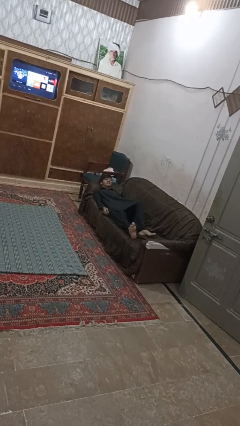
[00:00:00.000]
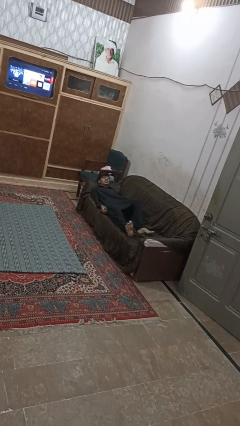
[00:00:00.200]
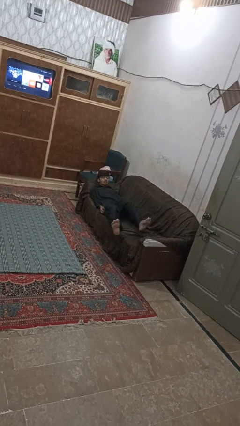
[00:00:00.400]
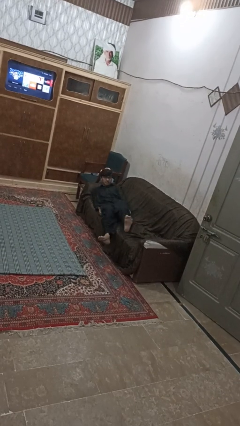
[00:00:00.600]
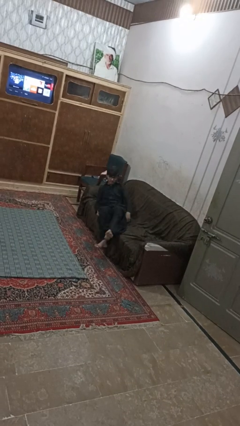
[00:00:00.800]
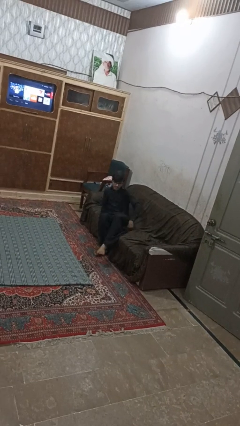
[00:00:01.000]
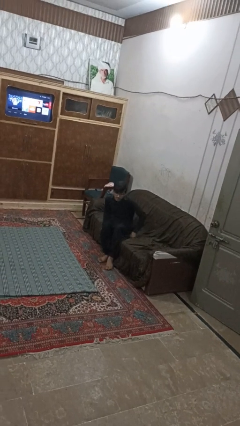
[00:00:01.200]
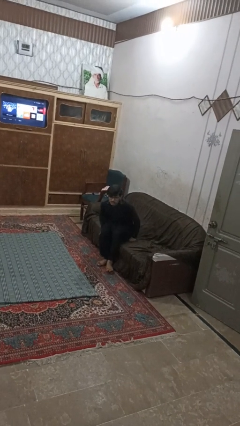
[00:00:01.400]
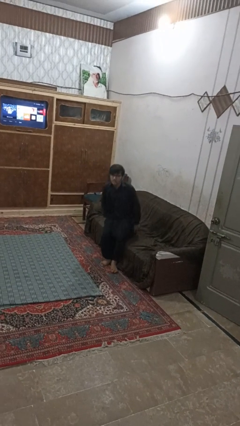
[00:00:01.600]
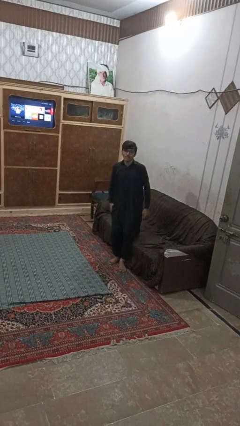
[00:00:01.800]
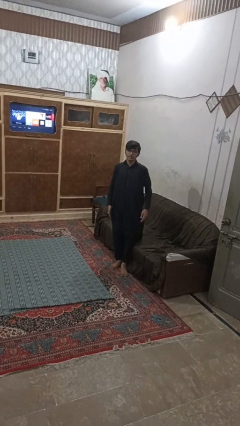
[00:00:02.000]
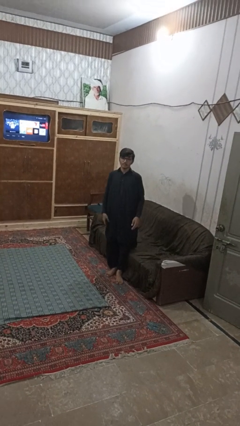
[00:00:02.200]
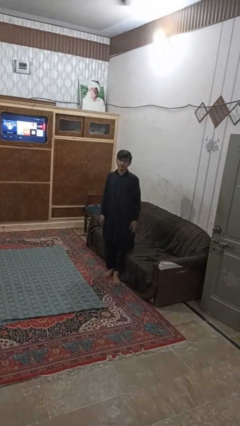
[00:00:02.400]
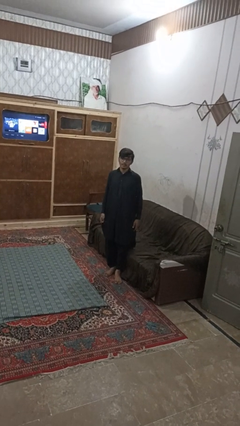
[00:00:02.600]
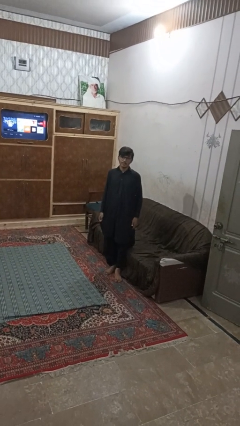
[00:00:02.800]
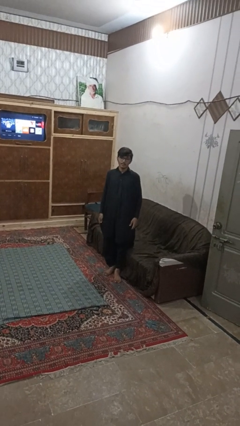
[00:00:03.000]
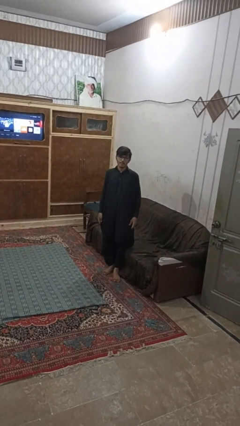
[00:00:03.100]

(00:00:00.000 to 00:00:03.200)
person stands up

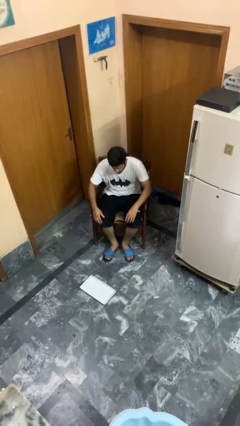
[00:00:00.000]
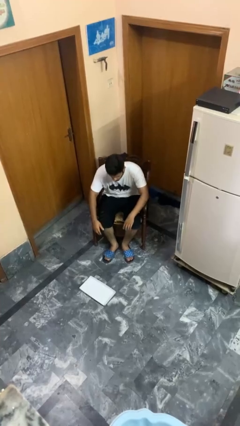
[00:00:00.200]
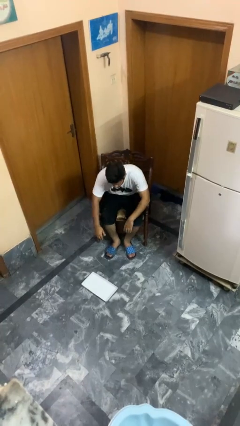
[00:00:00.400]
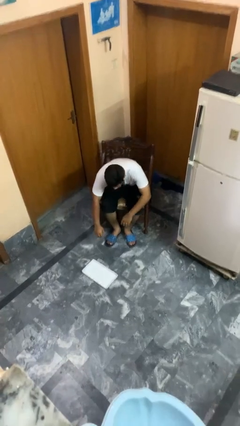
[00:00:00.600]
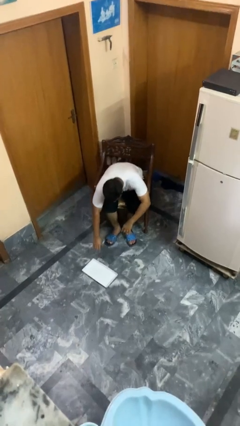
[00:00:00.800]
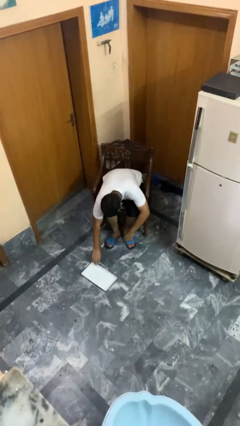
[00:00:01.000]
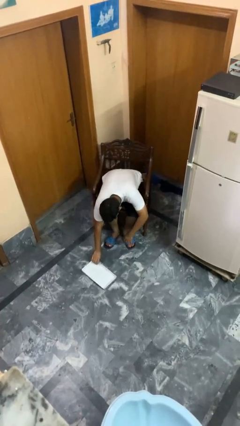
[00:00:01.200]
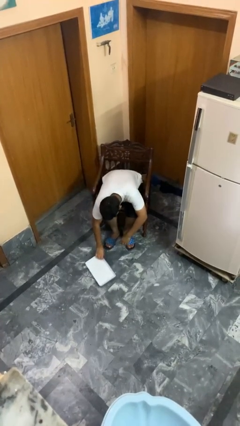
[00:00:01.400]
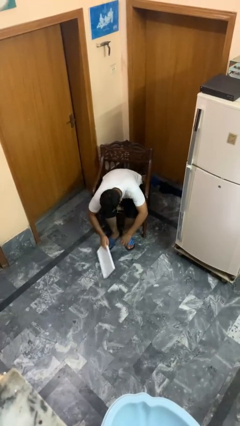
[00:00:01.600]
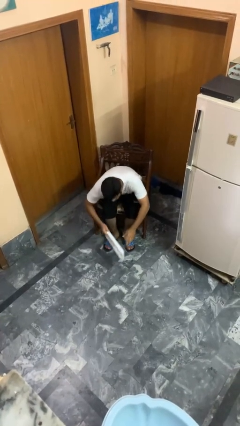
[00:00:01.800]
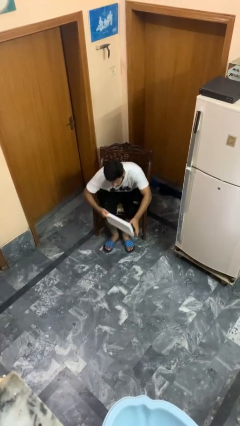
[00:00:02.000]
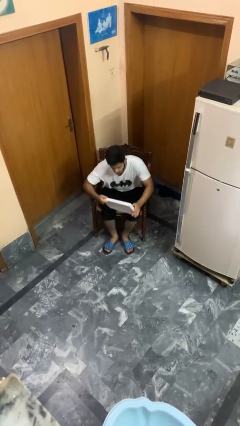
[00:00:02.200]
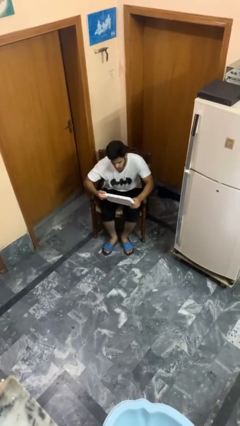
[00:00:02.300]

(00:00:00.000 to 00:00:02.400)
person picks up object from floor

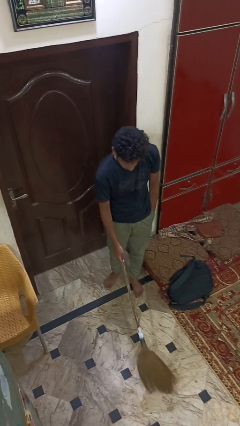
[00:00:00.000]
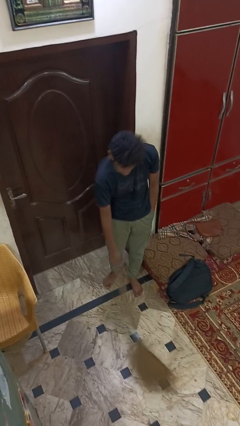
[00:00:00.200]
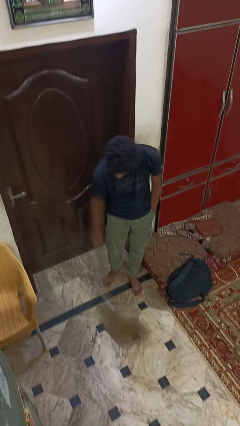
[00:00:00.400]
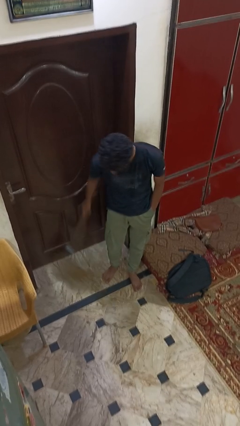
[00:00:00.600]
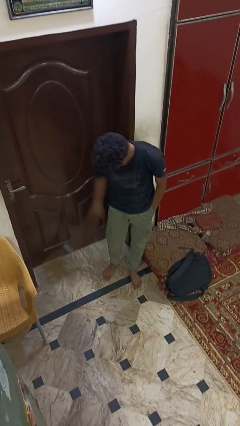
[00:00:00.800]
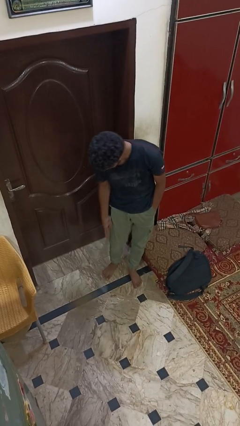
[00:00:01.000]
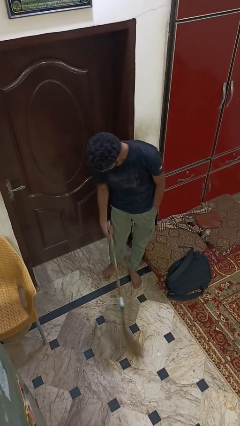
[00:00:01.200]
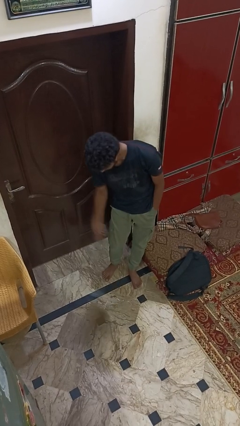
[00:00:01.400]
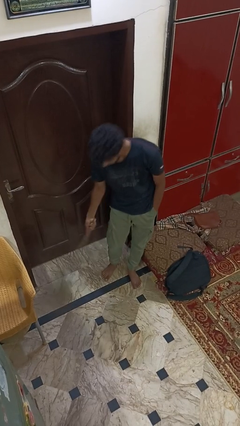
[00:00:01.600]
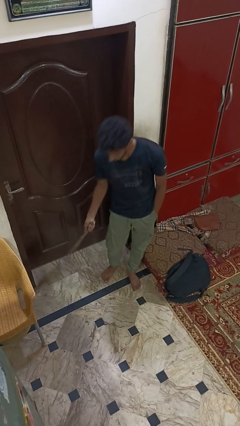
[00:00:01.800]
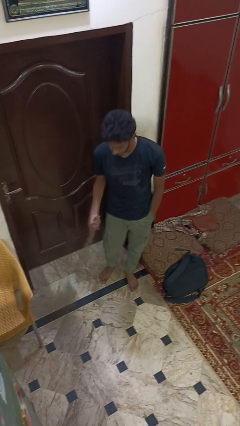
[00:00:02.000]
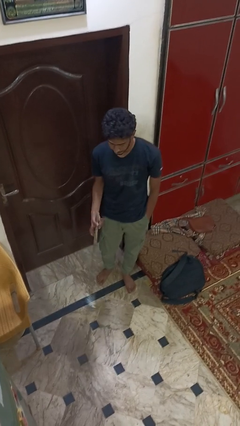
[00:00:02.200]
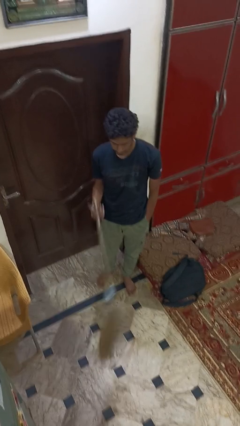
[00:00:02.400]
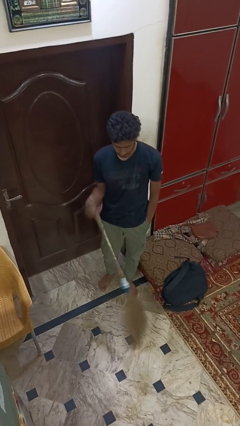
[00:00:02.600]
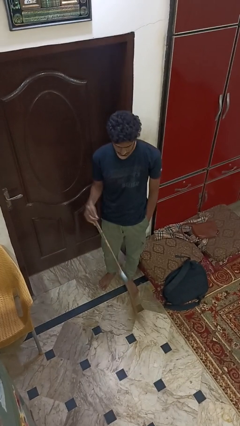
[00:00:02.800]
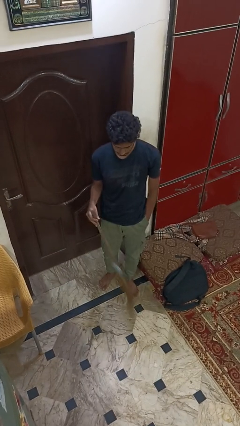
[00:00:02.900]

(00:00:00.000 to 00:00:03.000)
person sweeps floor

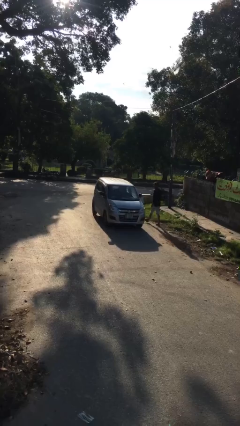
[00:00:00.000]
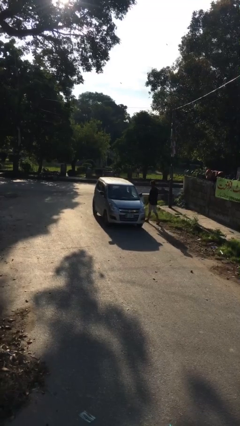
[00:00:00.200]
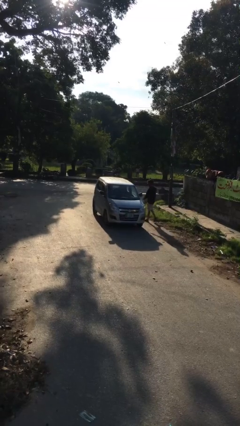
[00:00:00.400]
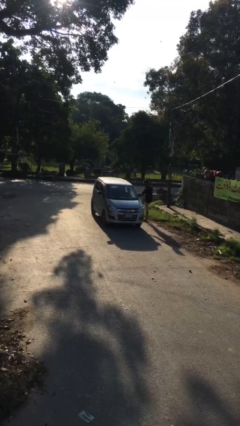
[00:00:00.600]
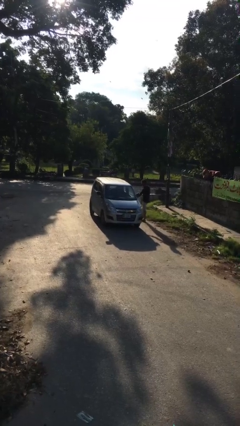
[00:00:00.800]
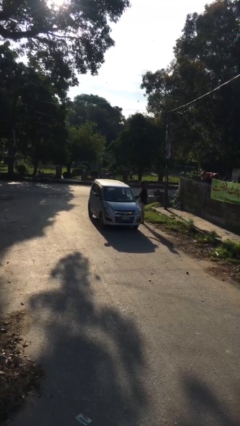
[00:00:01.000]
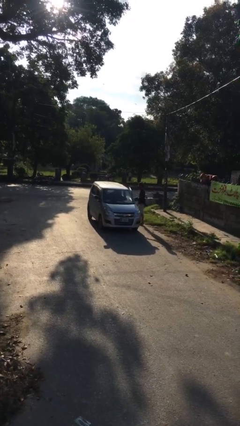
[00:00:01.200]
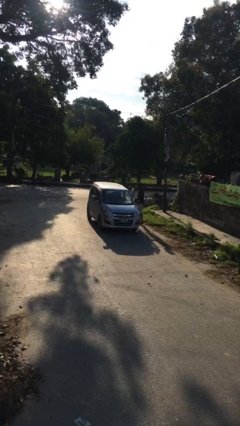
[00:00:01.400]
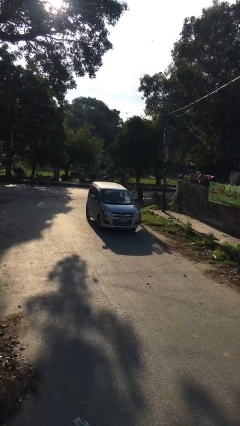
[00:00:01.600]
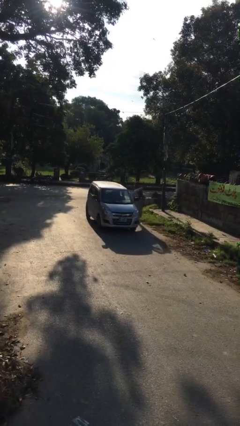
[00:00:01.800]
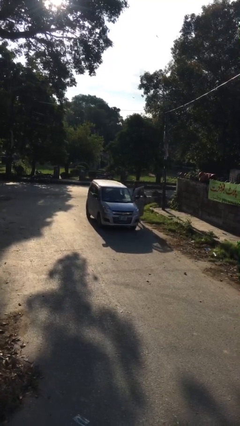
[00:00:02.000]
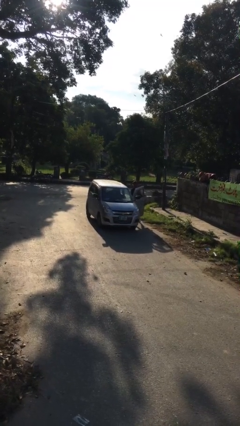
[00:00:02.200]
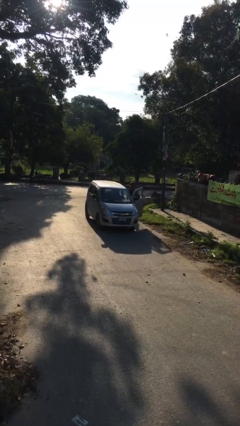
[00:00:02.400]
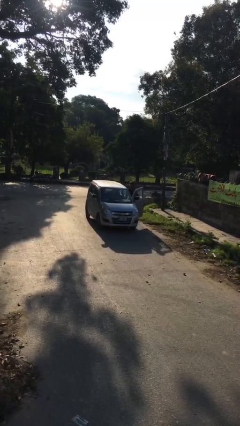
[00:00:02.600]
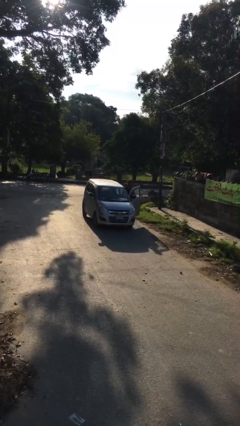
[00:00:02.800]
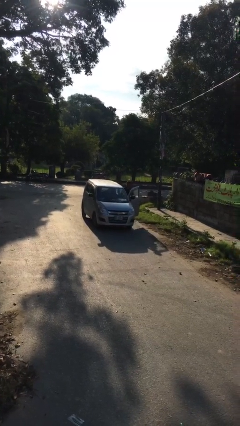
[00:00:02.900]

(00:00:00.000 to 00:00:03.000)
car picks up person

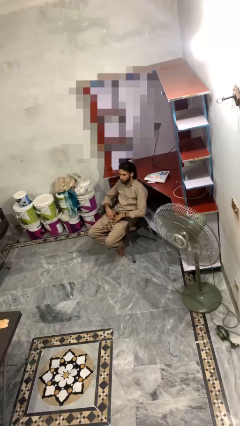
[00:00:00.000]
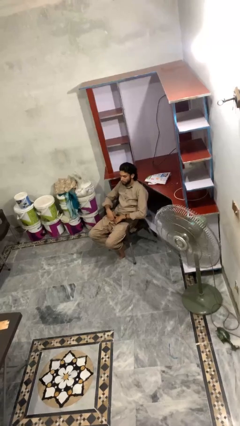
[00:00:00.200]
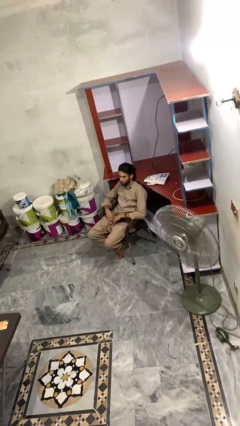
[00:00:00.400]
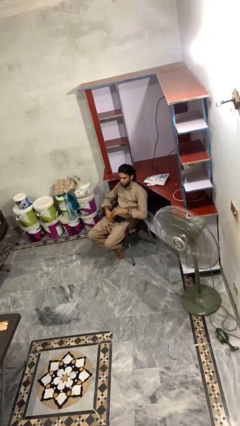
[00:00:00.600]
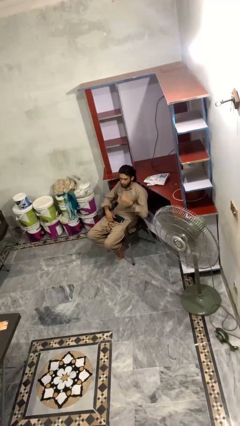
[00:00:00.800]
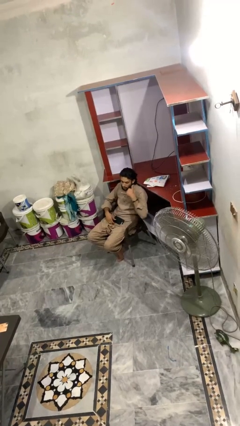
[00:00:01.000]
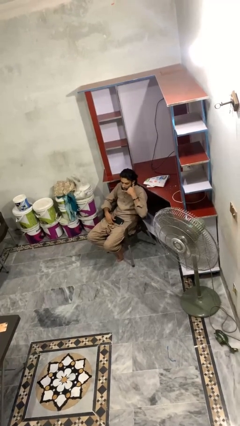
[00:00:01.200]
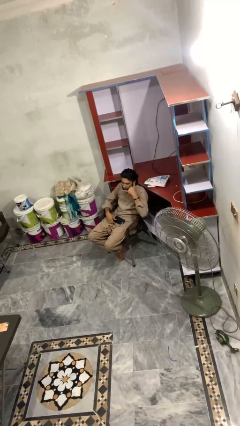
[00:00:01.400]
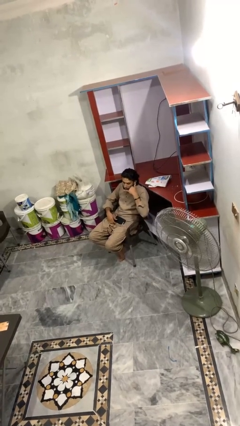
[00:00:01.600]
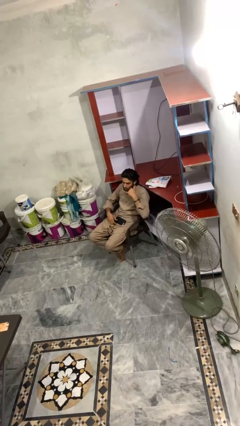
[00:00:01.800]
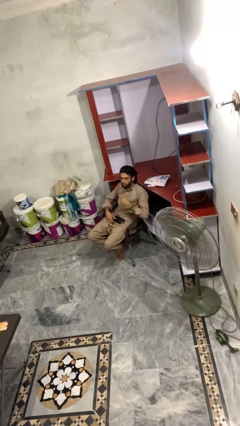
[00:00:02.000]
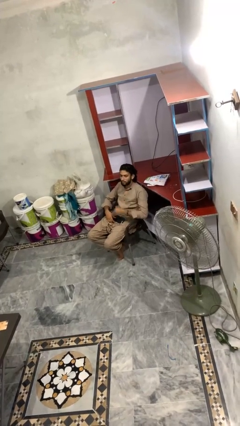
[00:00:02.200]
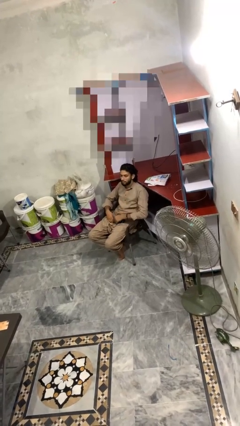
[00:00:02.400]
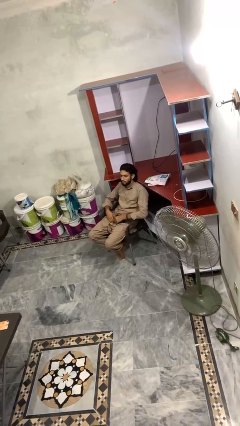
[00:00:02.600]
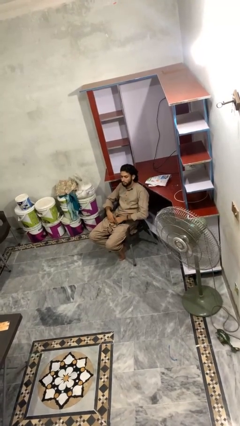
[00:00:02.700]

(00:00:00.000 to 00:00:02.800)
person gestures call me

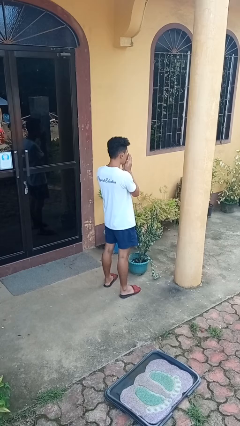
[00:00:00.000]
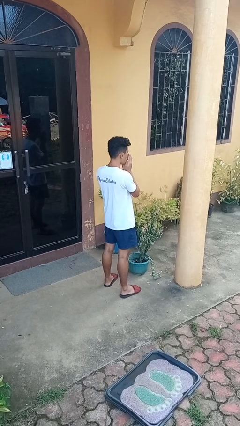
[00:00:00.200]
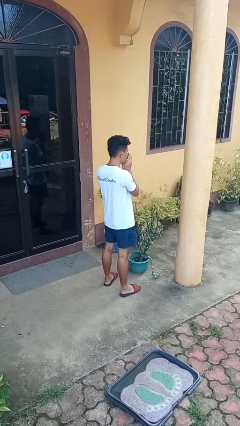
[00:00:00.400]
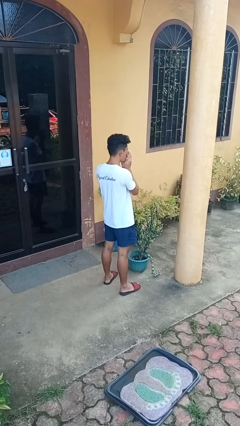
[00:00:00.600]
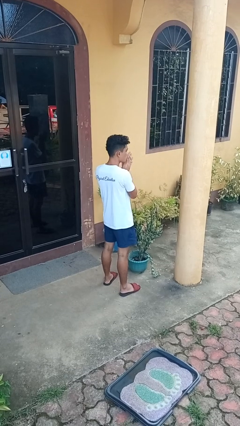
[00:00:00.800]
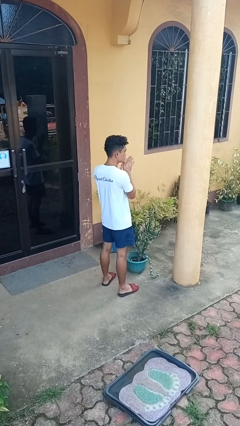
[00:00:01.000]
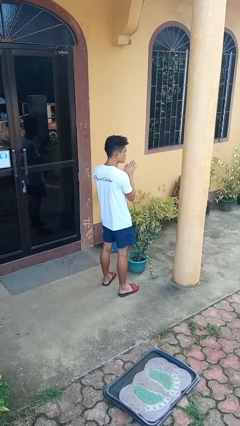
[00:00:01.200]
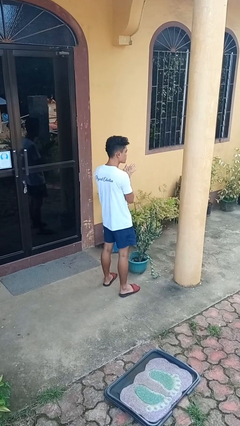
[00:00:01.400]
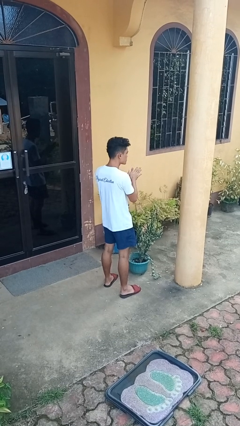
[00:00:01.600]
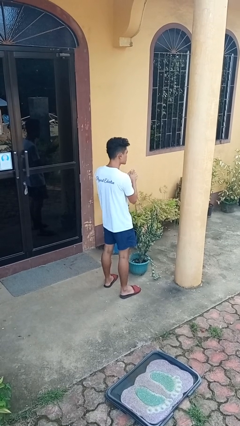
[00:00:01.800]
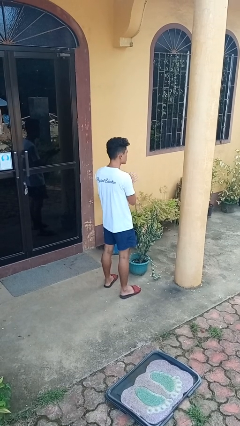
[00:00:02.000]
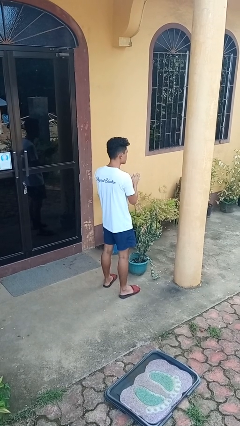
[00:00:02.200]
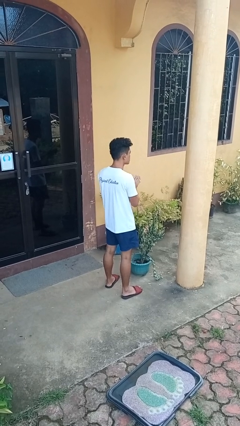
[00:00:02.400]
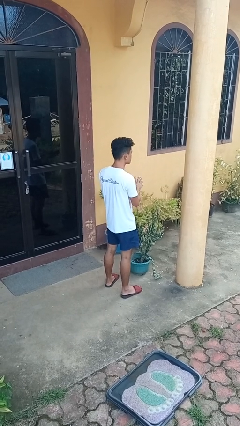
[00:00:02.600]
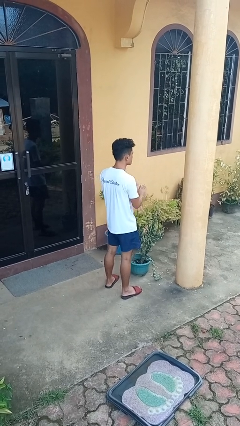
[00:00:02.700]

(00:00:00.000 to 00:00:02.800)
person blows into hands
